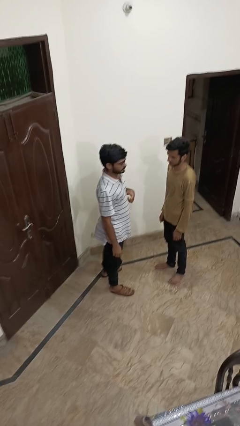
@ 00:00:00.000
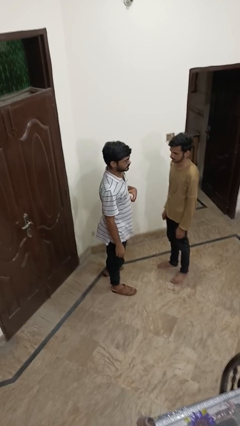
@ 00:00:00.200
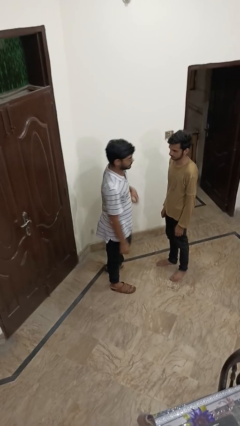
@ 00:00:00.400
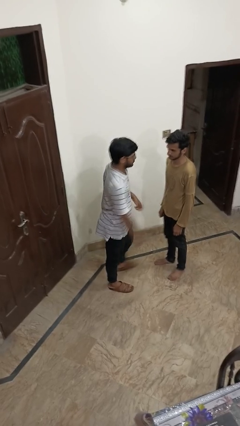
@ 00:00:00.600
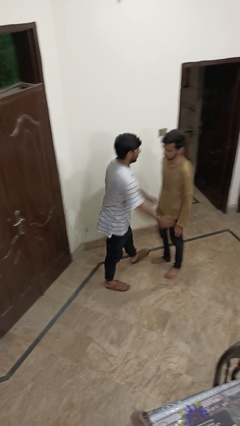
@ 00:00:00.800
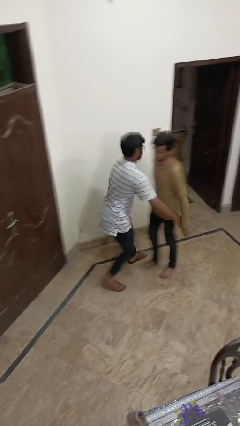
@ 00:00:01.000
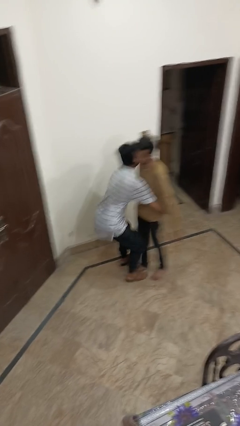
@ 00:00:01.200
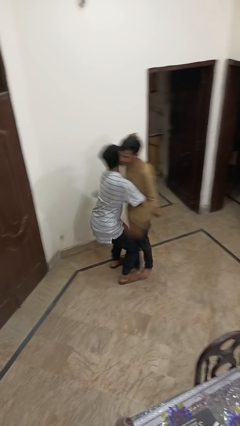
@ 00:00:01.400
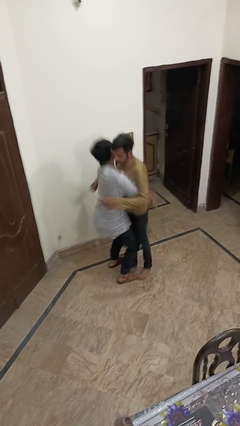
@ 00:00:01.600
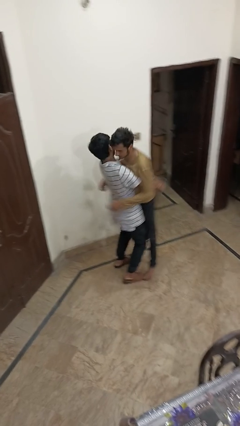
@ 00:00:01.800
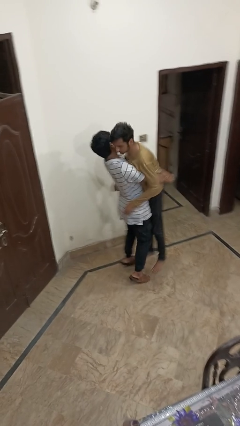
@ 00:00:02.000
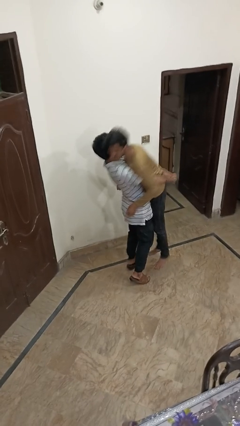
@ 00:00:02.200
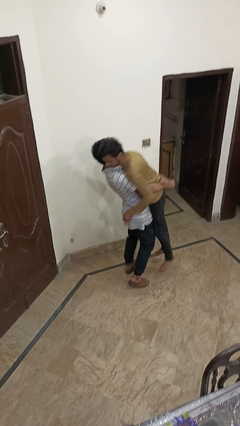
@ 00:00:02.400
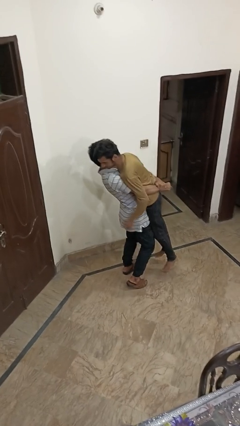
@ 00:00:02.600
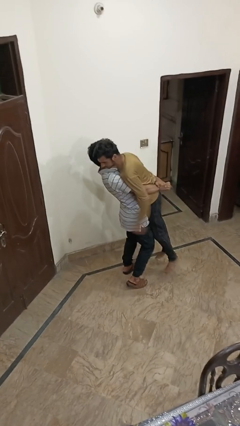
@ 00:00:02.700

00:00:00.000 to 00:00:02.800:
person picks up person

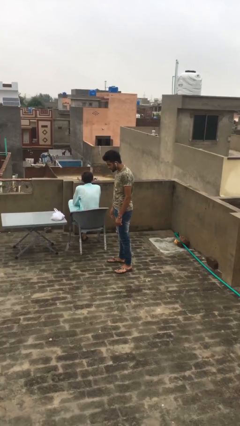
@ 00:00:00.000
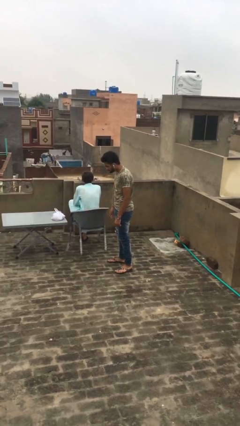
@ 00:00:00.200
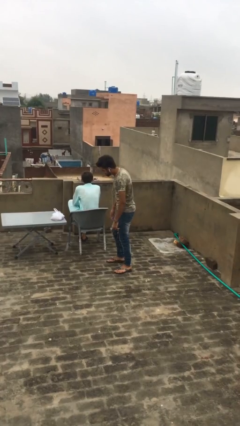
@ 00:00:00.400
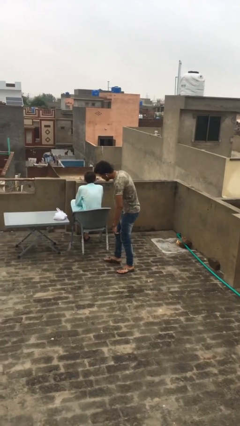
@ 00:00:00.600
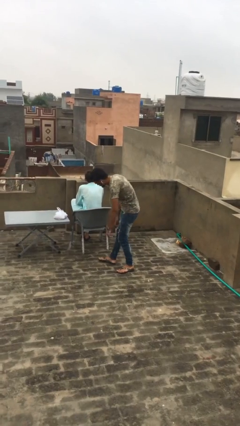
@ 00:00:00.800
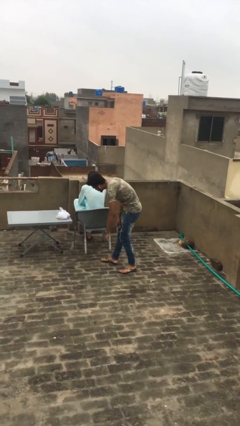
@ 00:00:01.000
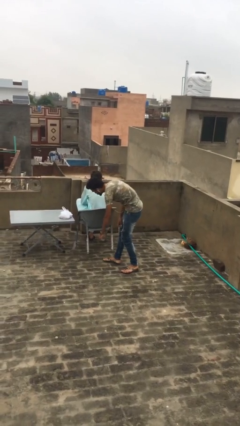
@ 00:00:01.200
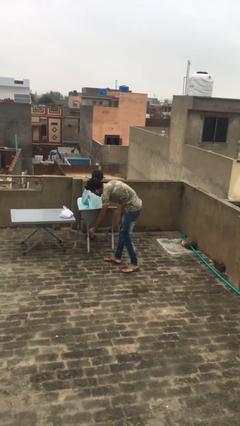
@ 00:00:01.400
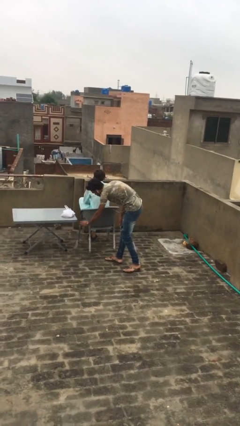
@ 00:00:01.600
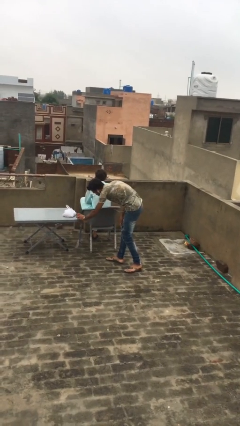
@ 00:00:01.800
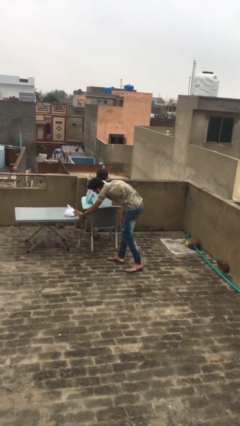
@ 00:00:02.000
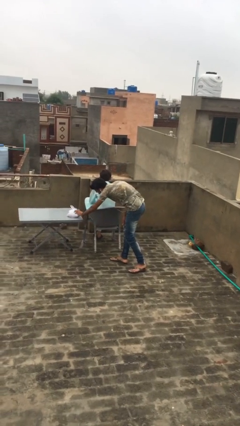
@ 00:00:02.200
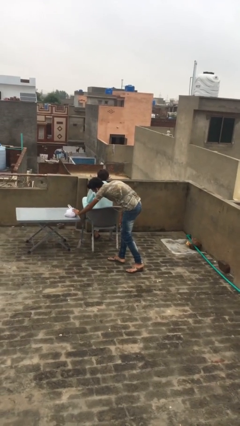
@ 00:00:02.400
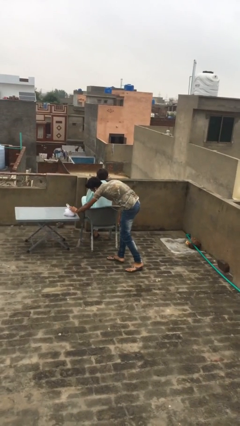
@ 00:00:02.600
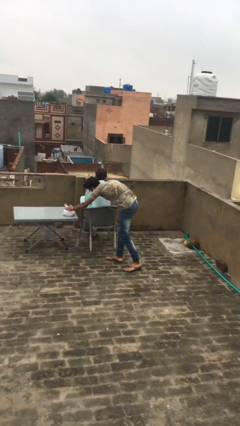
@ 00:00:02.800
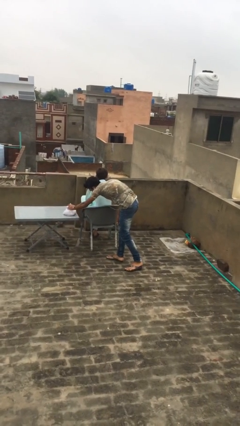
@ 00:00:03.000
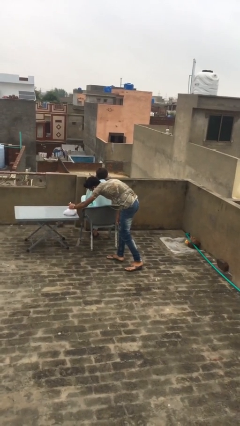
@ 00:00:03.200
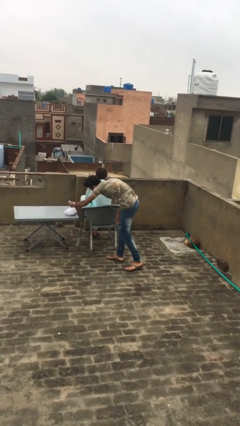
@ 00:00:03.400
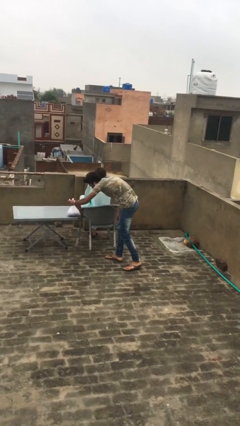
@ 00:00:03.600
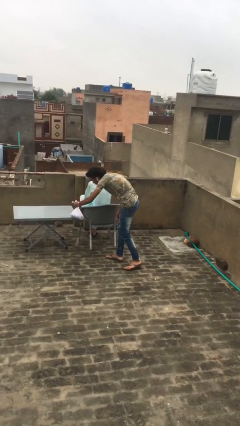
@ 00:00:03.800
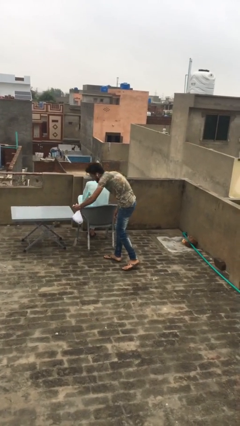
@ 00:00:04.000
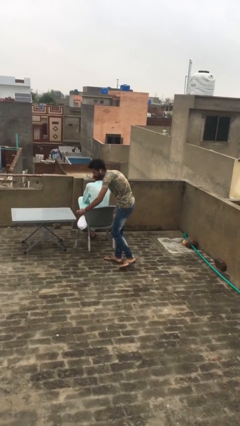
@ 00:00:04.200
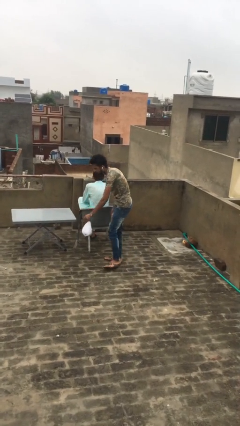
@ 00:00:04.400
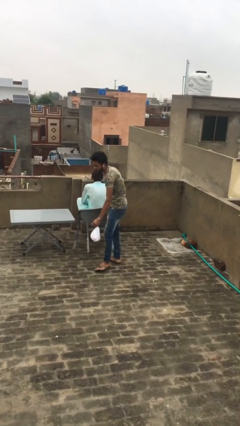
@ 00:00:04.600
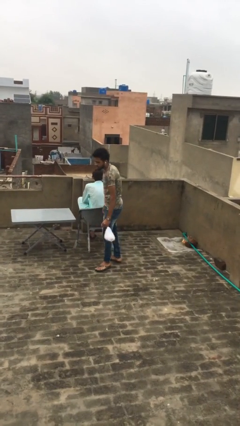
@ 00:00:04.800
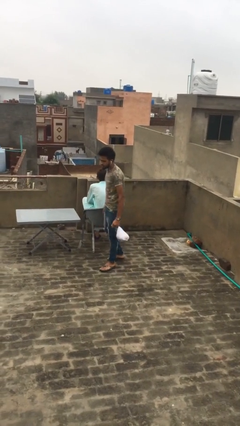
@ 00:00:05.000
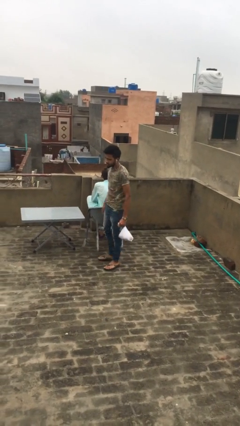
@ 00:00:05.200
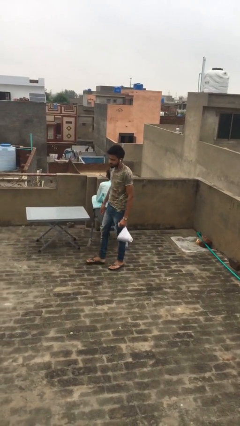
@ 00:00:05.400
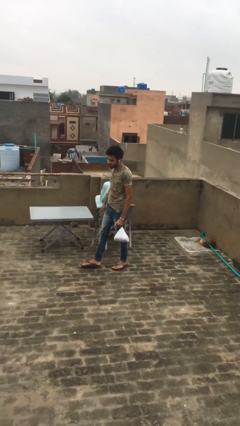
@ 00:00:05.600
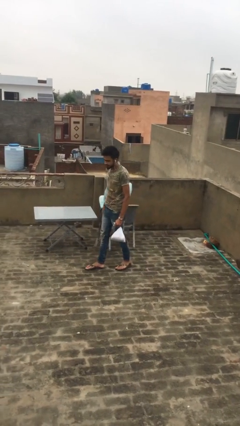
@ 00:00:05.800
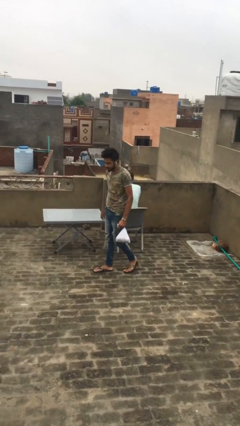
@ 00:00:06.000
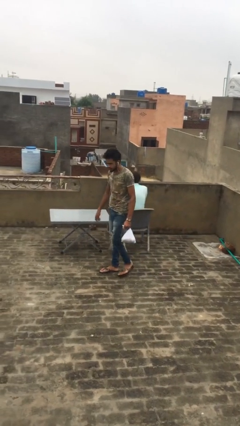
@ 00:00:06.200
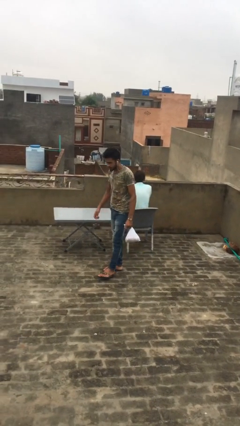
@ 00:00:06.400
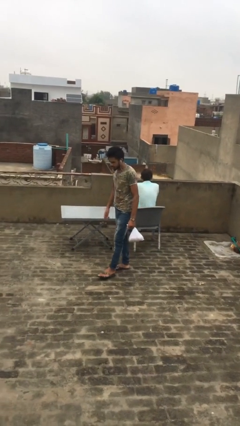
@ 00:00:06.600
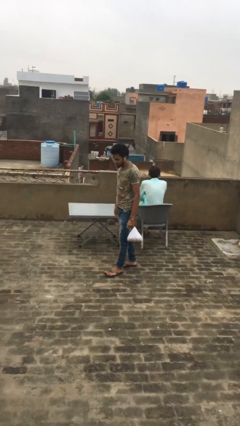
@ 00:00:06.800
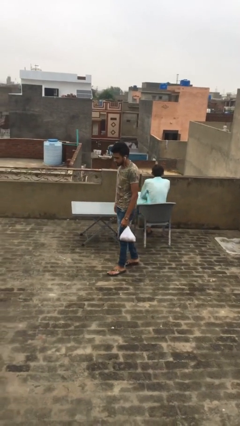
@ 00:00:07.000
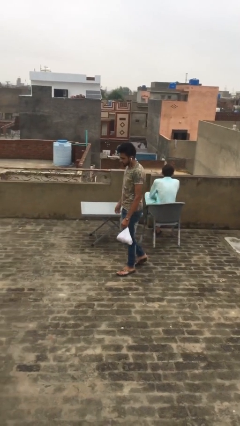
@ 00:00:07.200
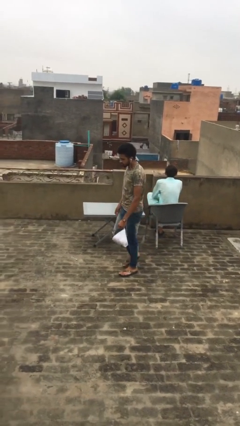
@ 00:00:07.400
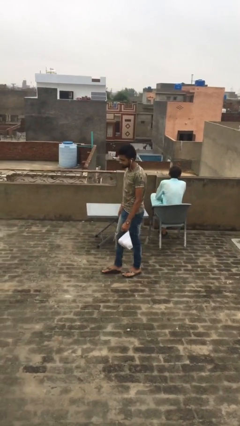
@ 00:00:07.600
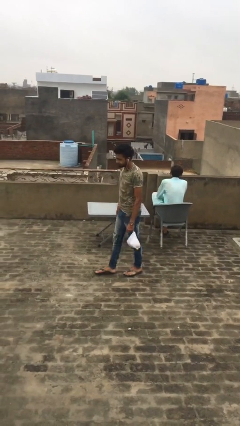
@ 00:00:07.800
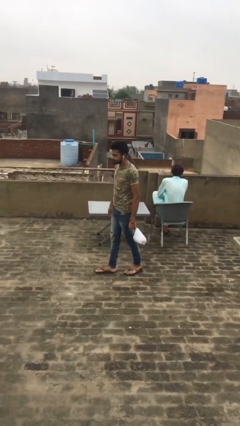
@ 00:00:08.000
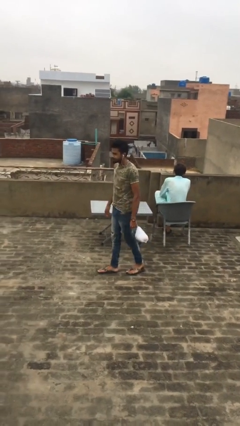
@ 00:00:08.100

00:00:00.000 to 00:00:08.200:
person steals object from person

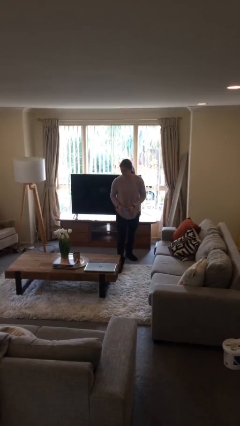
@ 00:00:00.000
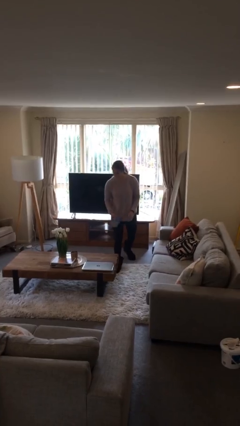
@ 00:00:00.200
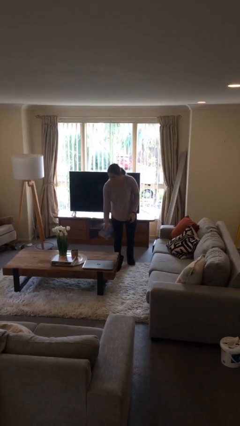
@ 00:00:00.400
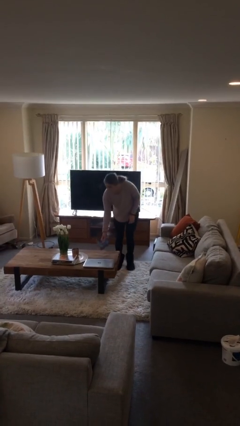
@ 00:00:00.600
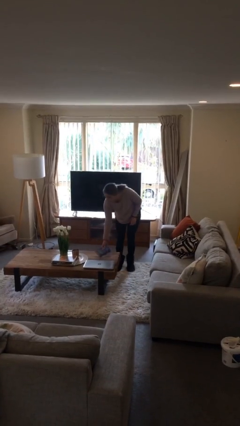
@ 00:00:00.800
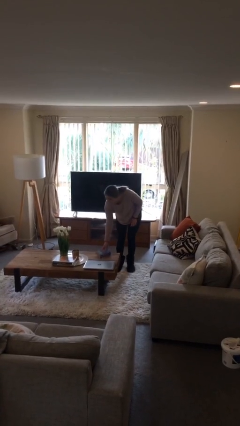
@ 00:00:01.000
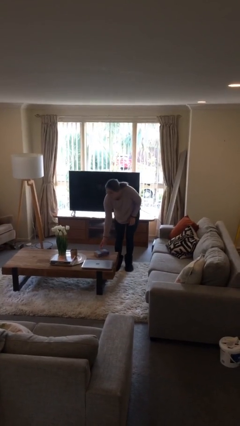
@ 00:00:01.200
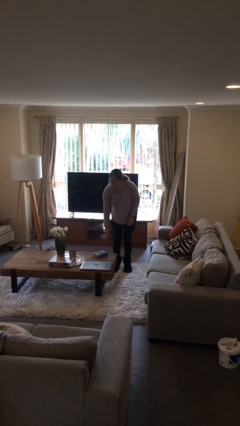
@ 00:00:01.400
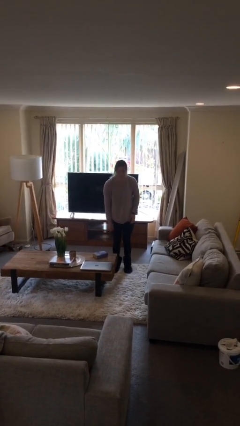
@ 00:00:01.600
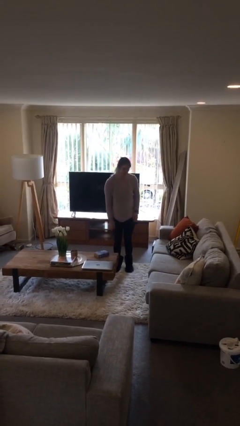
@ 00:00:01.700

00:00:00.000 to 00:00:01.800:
person puts down object on table

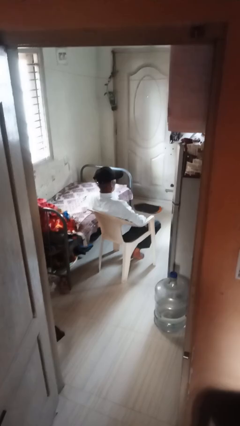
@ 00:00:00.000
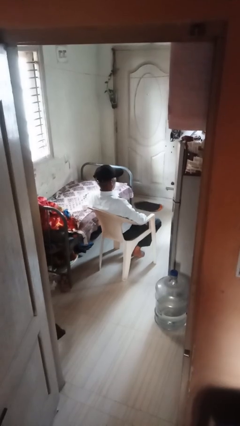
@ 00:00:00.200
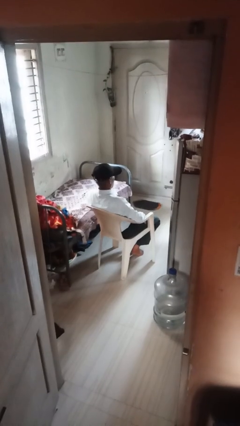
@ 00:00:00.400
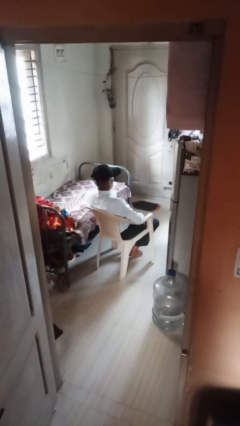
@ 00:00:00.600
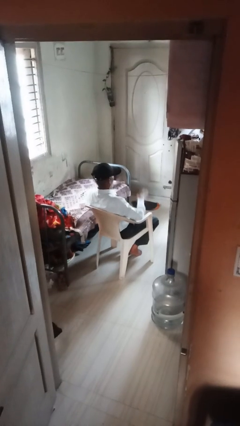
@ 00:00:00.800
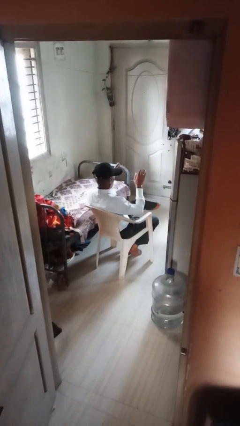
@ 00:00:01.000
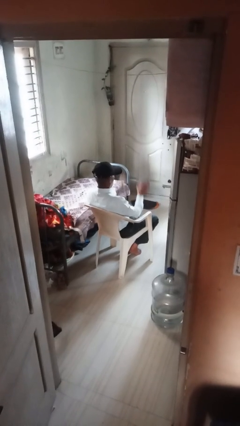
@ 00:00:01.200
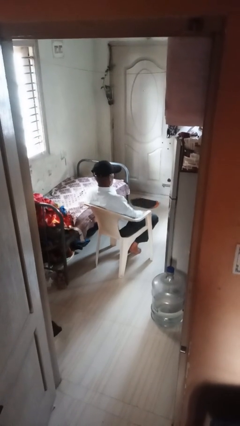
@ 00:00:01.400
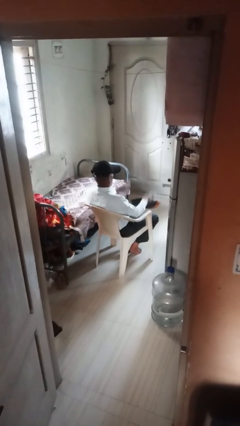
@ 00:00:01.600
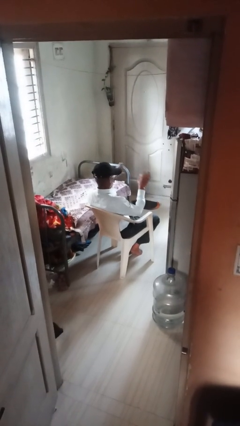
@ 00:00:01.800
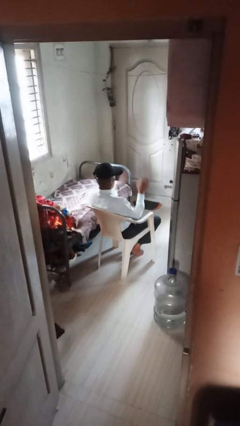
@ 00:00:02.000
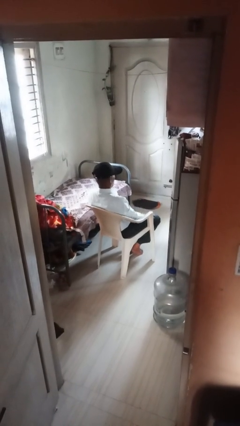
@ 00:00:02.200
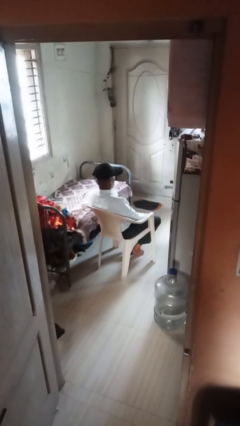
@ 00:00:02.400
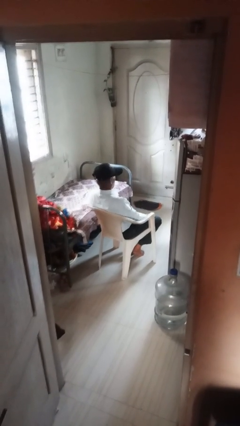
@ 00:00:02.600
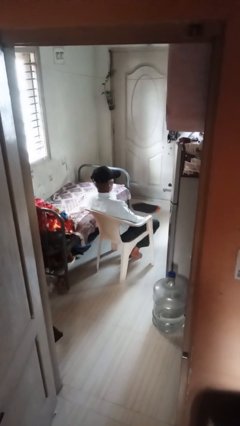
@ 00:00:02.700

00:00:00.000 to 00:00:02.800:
person slaps hands on thighs

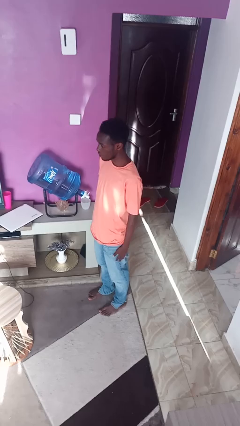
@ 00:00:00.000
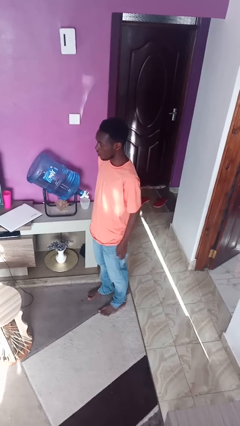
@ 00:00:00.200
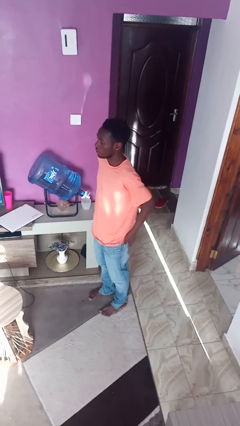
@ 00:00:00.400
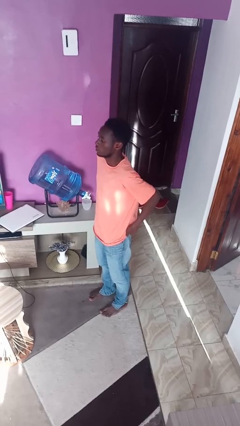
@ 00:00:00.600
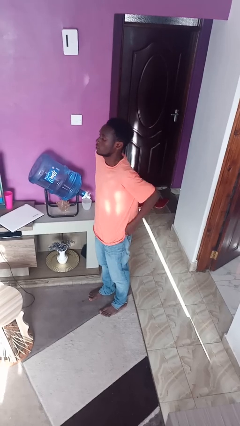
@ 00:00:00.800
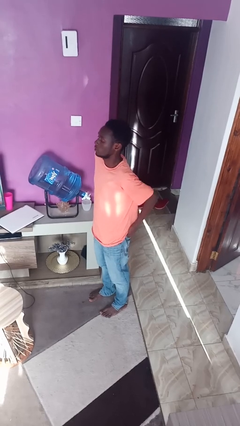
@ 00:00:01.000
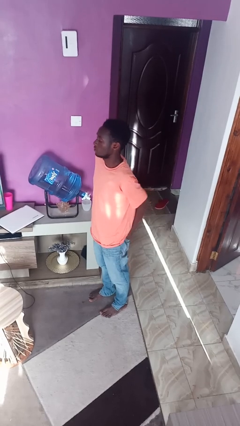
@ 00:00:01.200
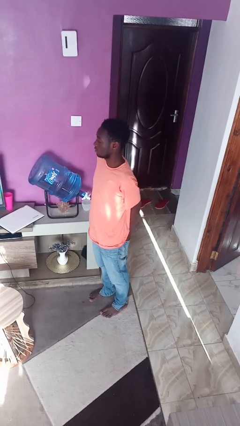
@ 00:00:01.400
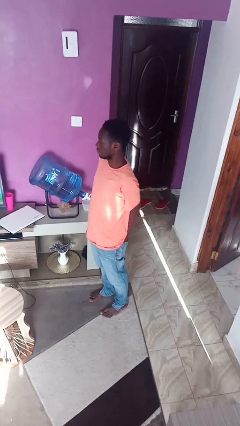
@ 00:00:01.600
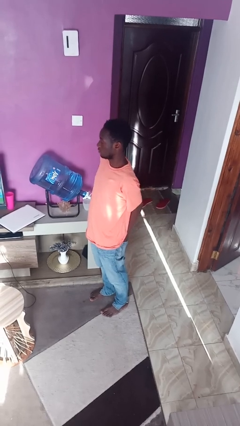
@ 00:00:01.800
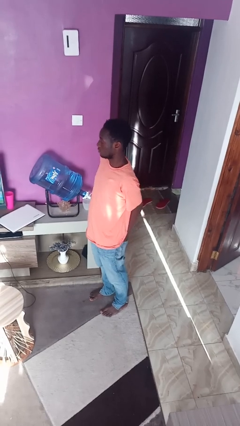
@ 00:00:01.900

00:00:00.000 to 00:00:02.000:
person puts hands in back pockets
